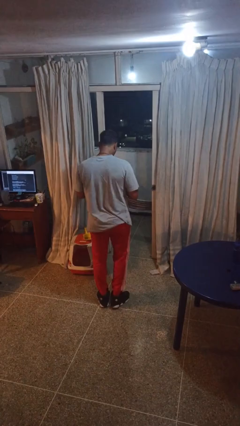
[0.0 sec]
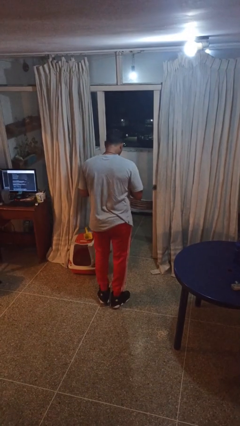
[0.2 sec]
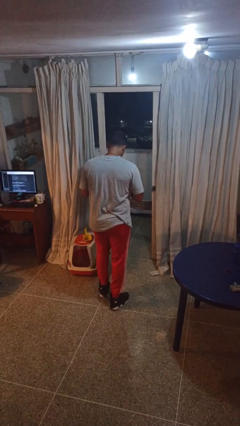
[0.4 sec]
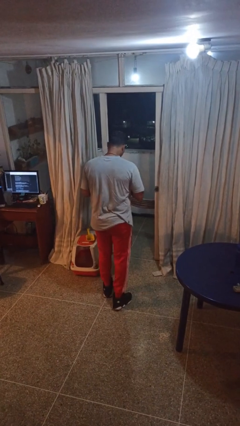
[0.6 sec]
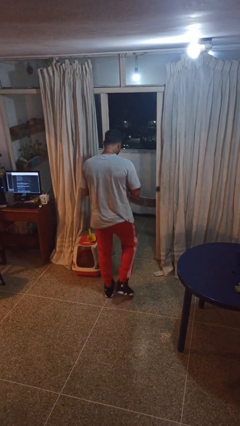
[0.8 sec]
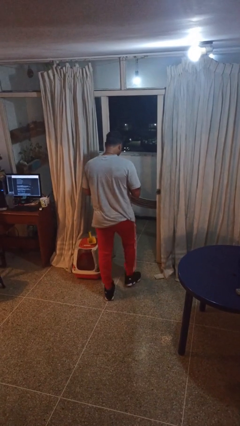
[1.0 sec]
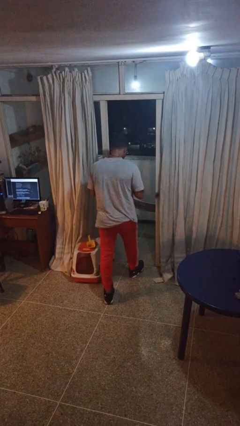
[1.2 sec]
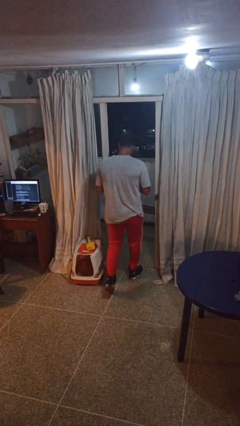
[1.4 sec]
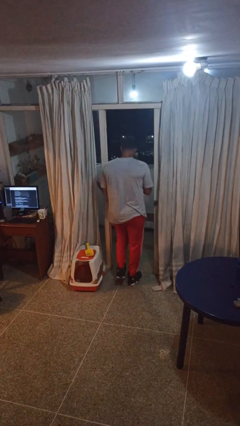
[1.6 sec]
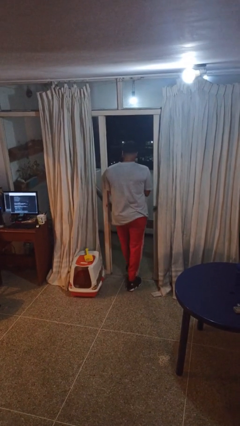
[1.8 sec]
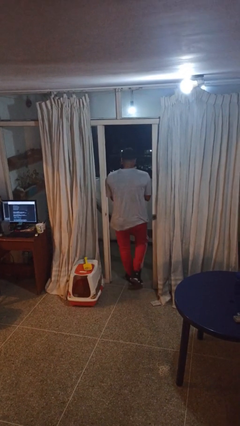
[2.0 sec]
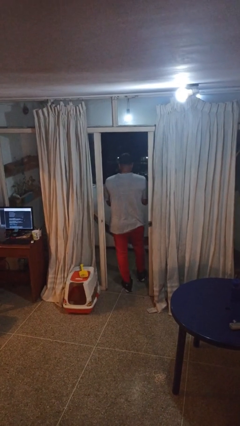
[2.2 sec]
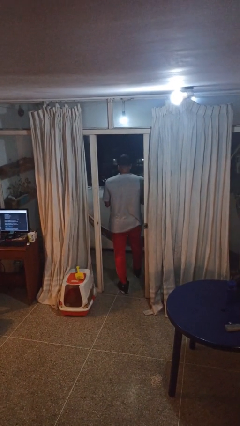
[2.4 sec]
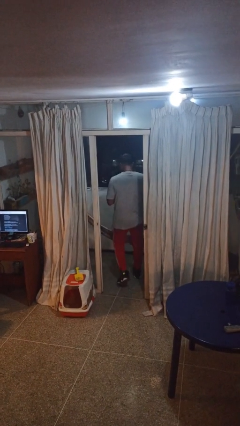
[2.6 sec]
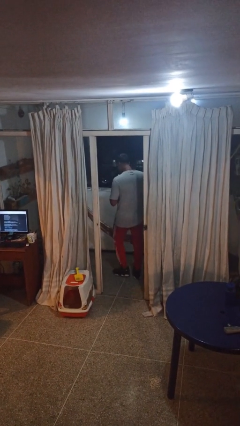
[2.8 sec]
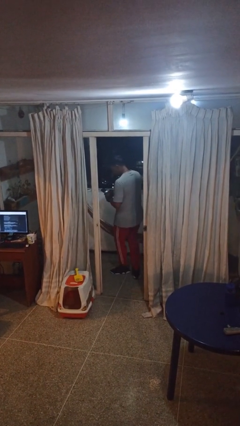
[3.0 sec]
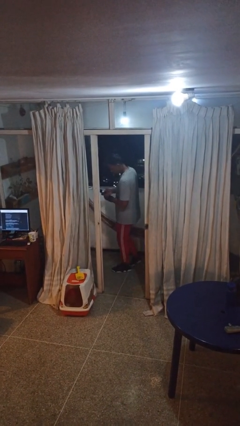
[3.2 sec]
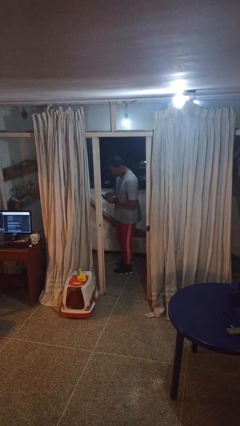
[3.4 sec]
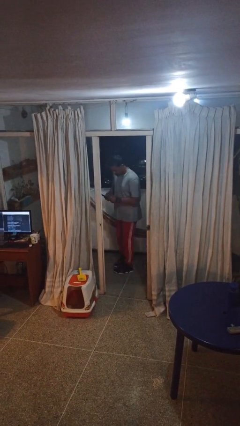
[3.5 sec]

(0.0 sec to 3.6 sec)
person exits scene through structure

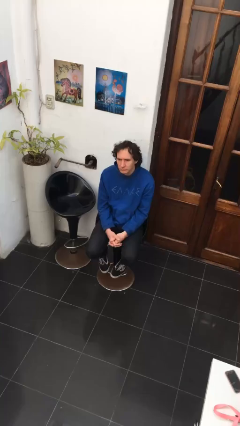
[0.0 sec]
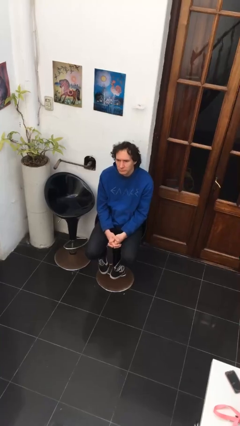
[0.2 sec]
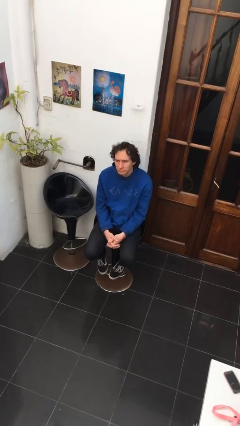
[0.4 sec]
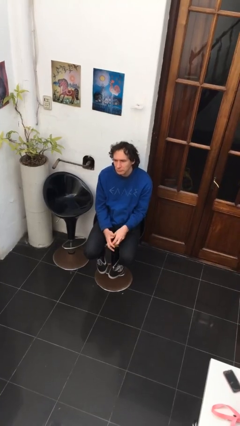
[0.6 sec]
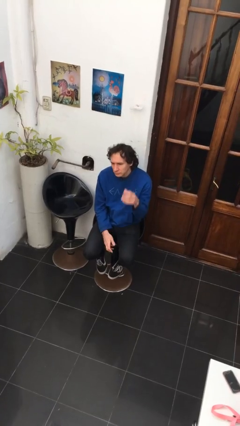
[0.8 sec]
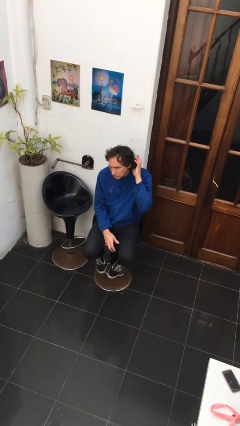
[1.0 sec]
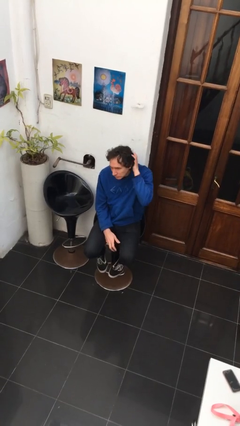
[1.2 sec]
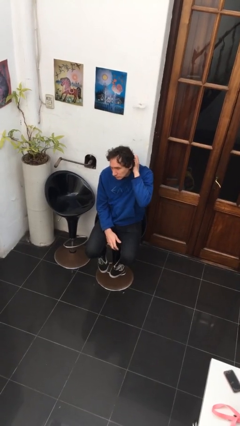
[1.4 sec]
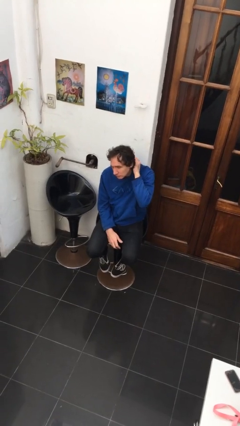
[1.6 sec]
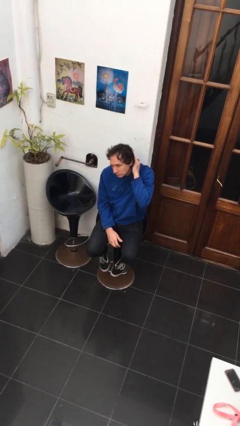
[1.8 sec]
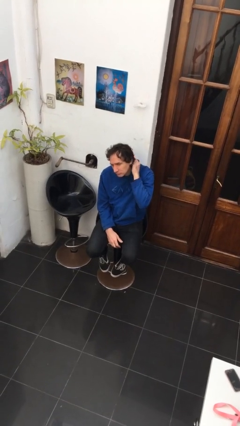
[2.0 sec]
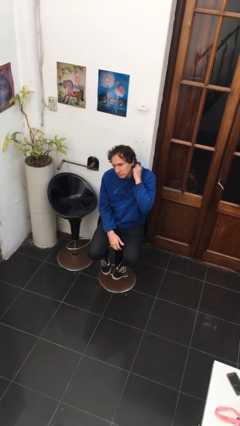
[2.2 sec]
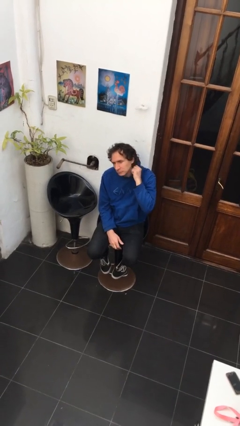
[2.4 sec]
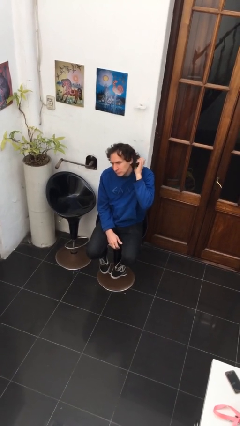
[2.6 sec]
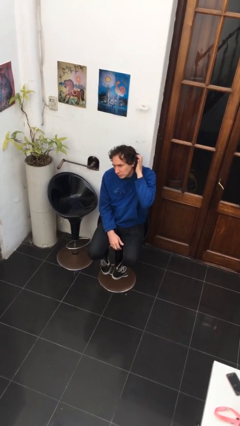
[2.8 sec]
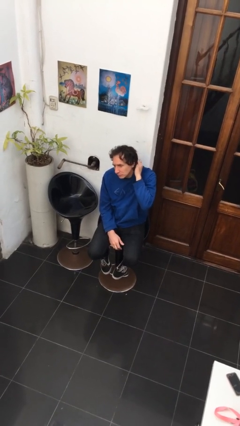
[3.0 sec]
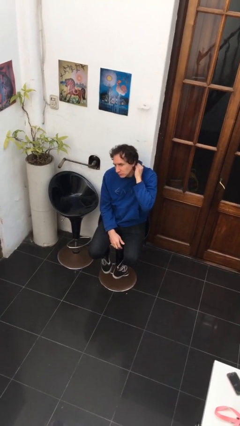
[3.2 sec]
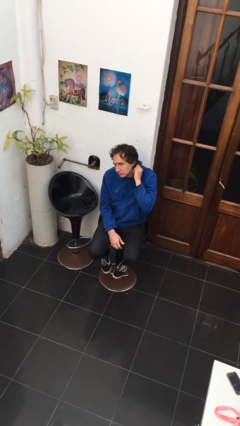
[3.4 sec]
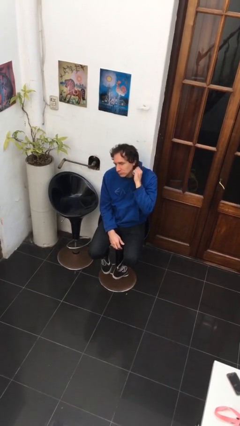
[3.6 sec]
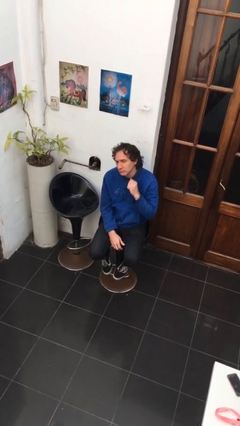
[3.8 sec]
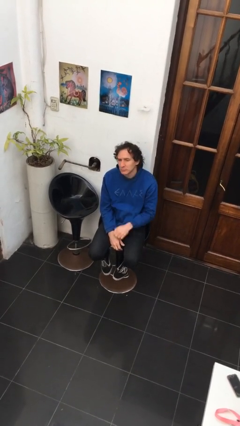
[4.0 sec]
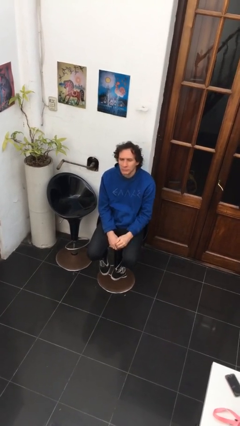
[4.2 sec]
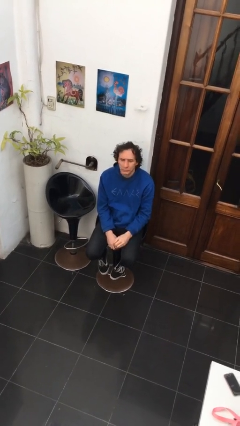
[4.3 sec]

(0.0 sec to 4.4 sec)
person strokes hair

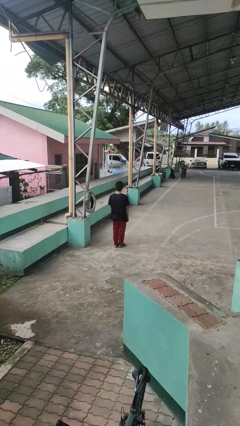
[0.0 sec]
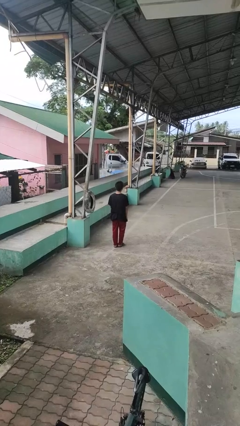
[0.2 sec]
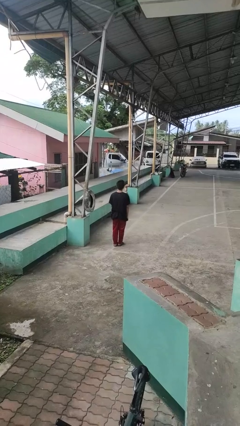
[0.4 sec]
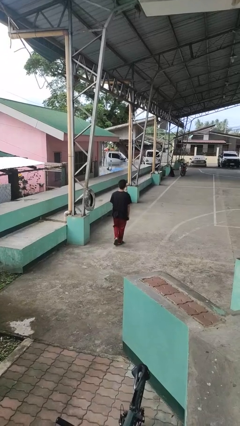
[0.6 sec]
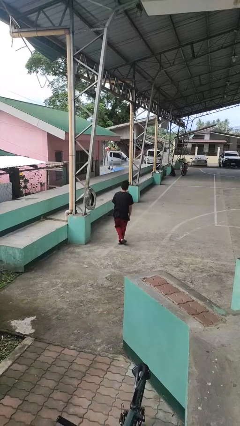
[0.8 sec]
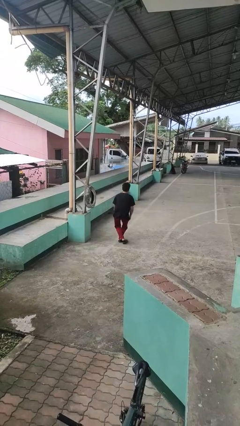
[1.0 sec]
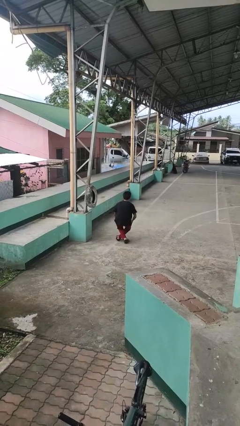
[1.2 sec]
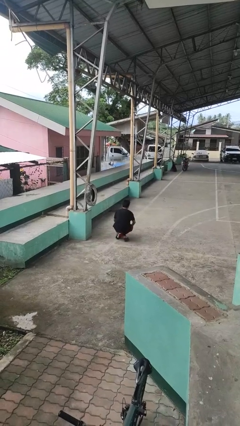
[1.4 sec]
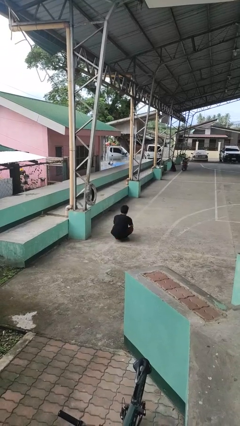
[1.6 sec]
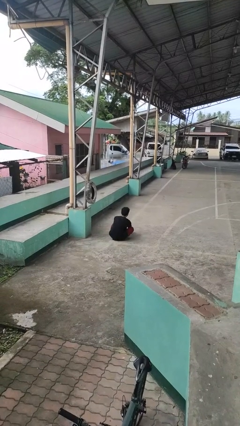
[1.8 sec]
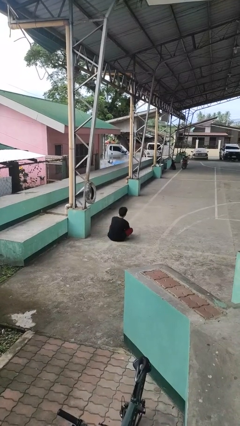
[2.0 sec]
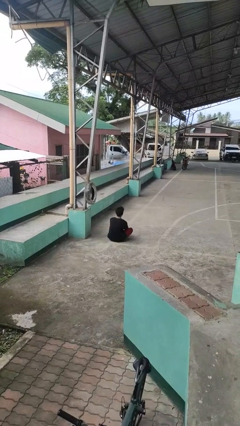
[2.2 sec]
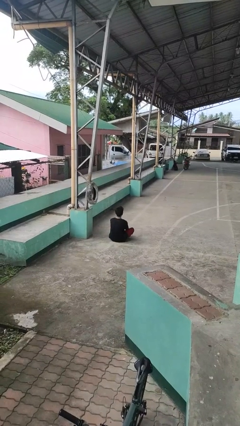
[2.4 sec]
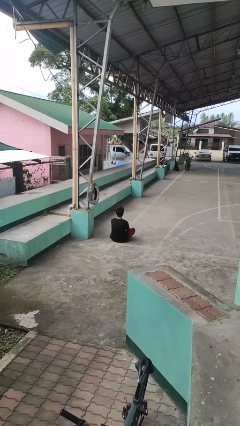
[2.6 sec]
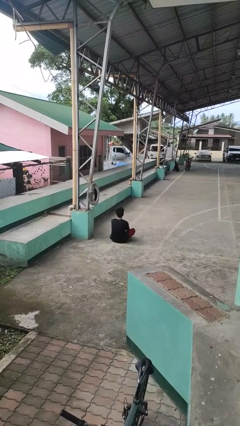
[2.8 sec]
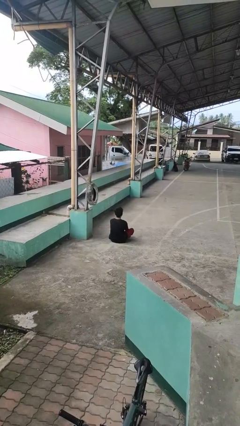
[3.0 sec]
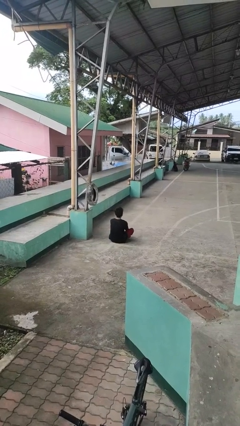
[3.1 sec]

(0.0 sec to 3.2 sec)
person sits crisscross

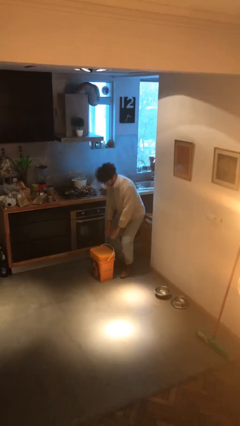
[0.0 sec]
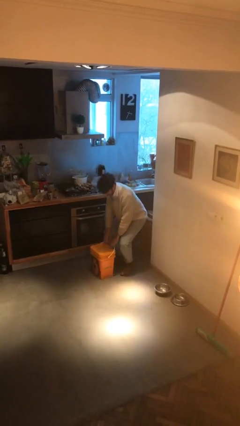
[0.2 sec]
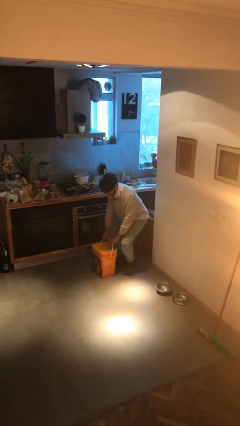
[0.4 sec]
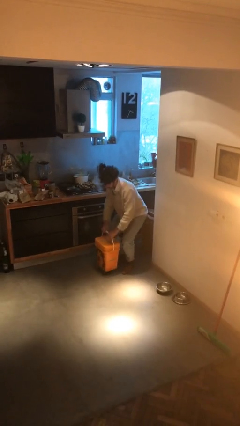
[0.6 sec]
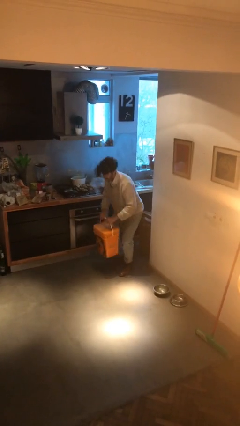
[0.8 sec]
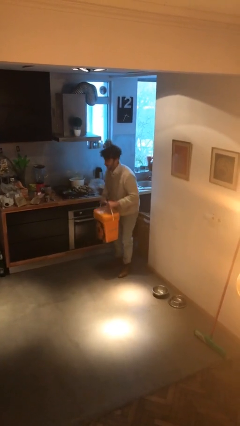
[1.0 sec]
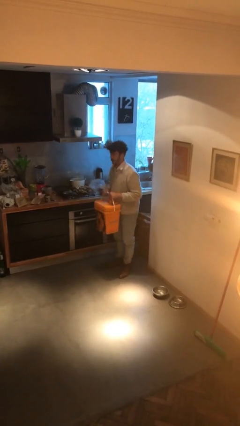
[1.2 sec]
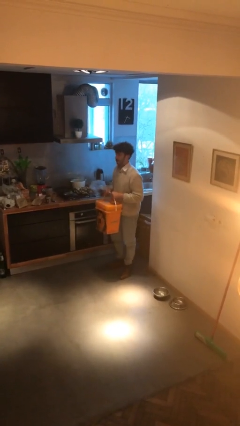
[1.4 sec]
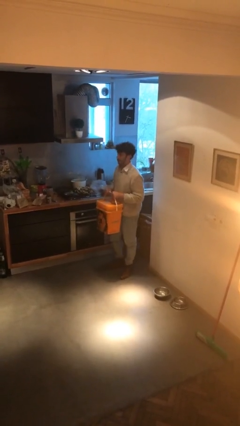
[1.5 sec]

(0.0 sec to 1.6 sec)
person picks up object from floor

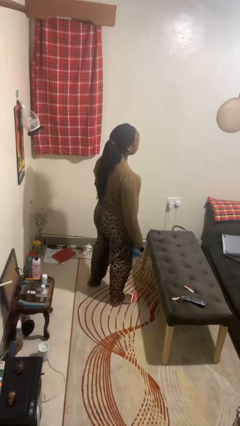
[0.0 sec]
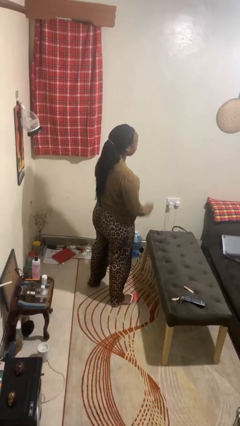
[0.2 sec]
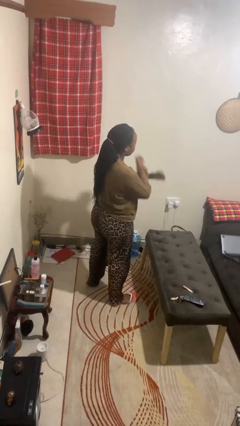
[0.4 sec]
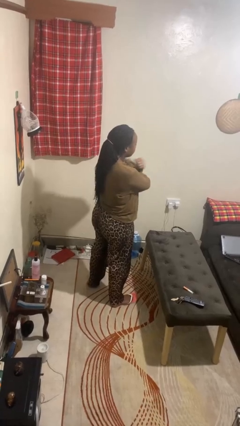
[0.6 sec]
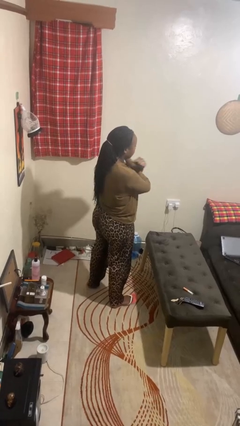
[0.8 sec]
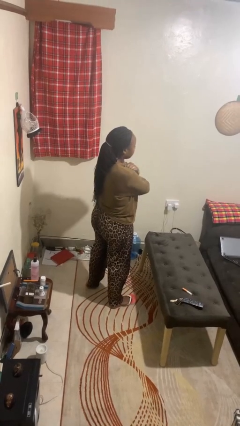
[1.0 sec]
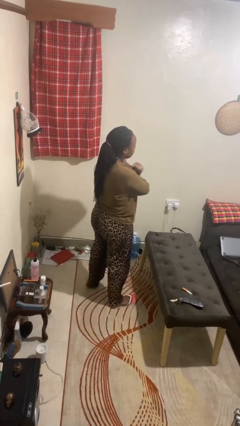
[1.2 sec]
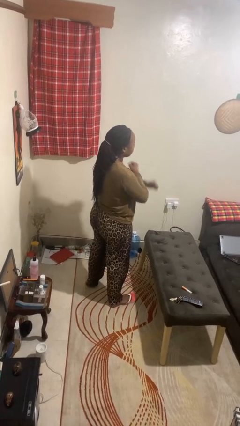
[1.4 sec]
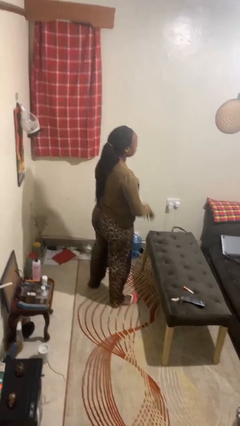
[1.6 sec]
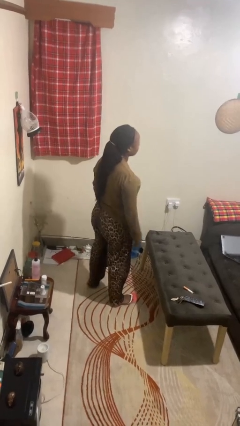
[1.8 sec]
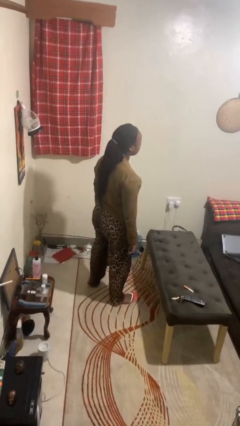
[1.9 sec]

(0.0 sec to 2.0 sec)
person gestures arms x

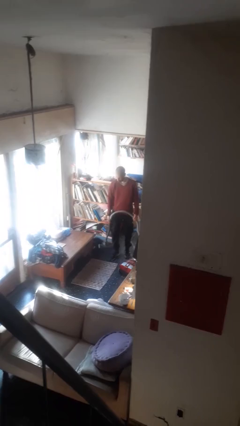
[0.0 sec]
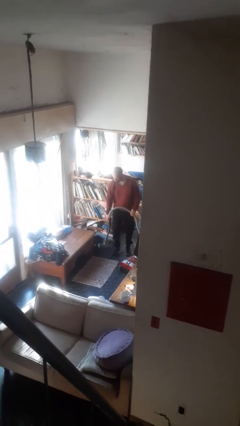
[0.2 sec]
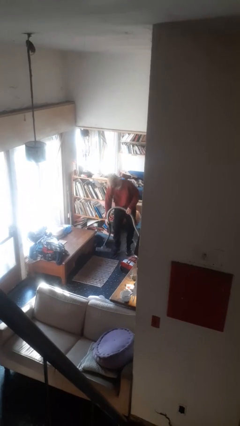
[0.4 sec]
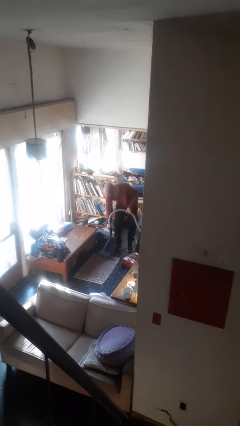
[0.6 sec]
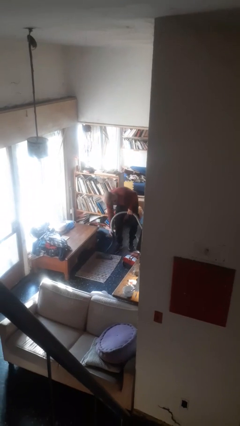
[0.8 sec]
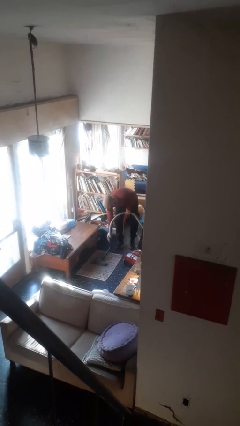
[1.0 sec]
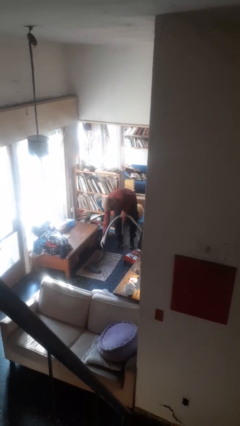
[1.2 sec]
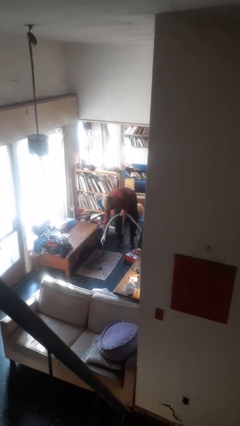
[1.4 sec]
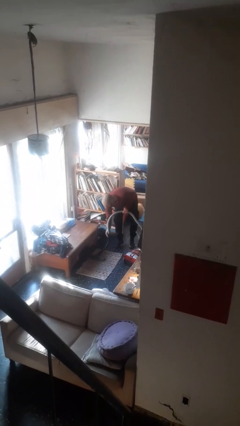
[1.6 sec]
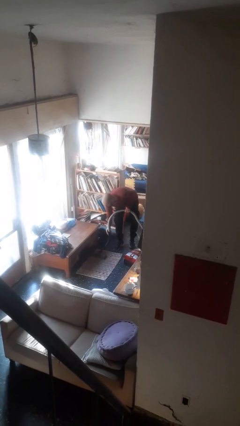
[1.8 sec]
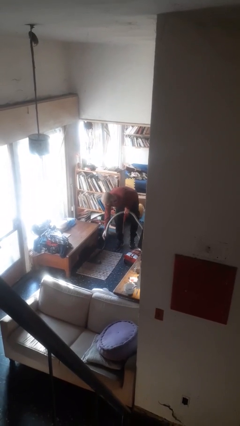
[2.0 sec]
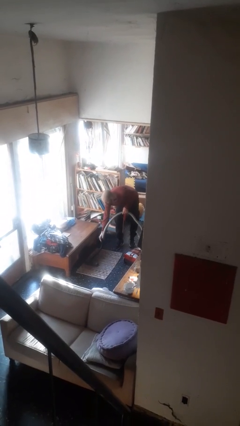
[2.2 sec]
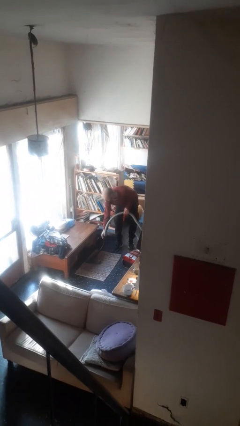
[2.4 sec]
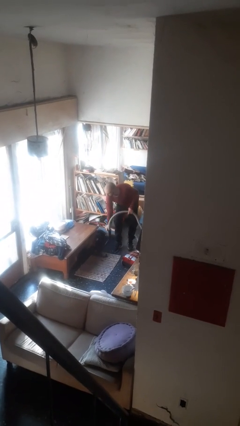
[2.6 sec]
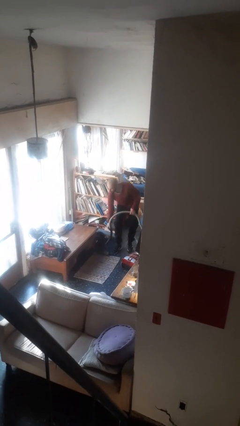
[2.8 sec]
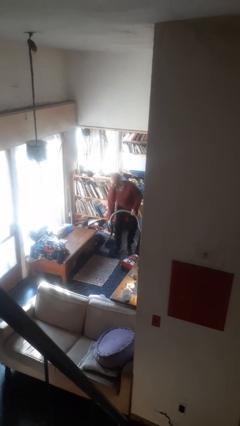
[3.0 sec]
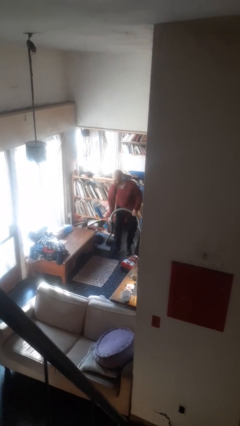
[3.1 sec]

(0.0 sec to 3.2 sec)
person vacuums carpet
